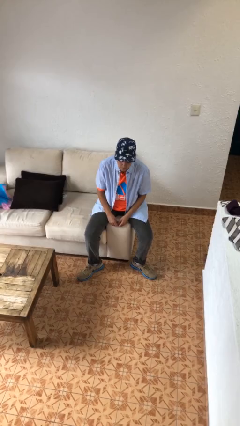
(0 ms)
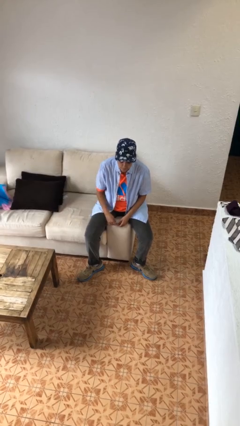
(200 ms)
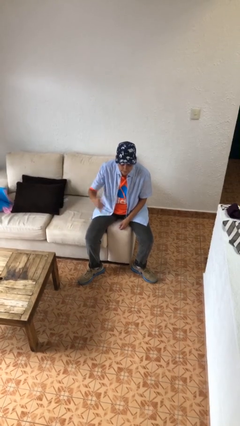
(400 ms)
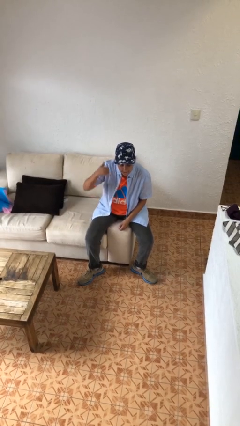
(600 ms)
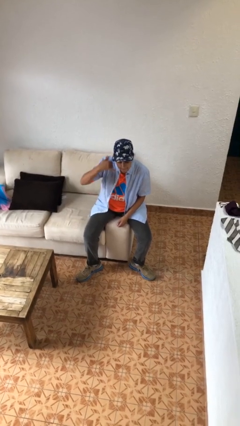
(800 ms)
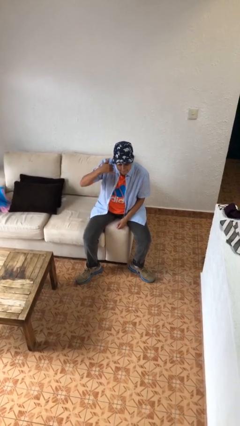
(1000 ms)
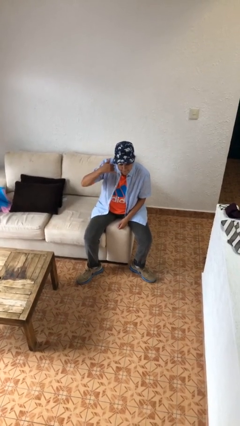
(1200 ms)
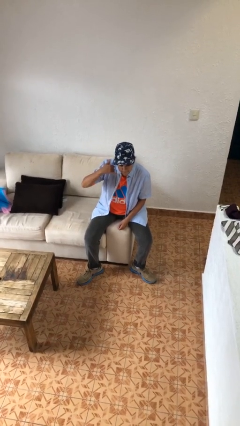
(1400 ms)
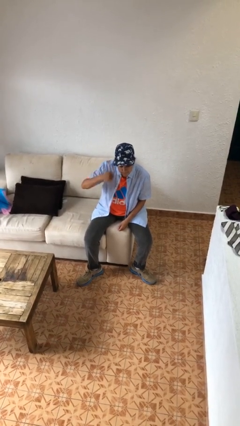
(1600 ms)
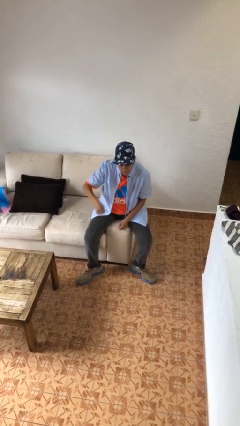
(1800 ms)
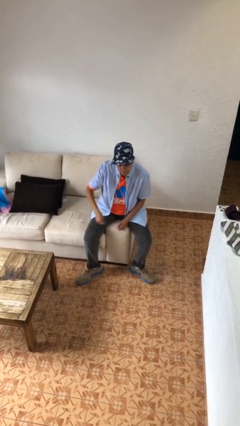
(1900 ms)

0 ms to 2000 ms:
person gestures call me

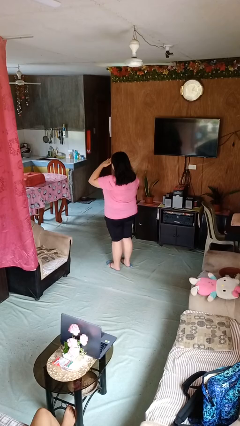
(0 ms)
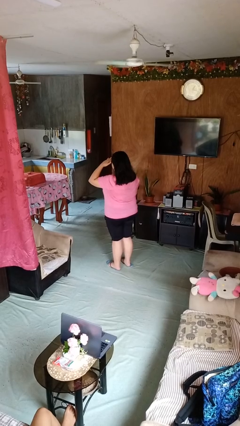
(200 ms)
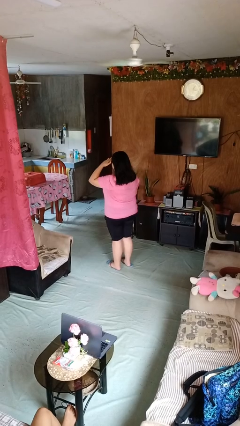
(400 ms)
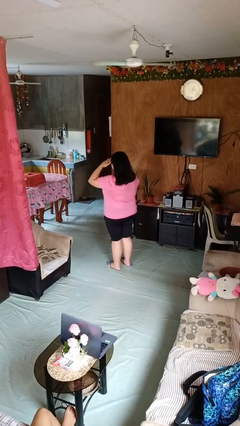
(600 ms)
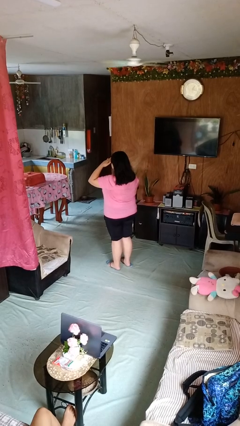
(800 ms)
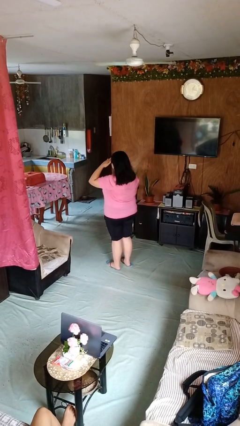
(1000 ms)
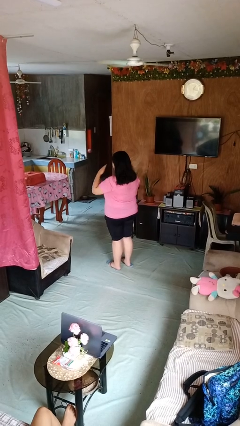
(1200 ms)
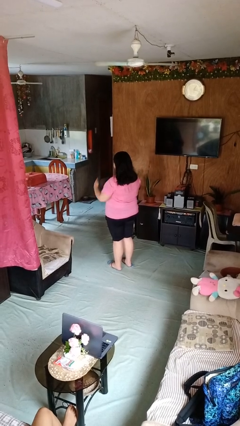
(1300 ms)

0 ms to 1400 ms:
person salutes

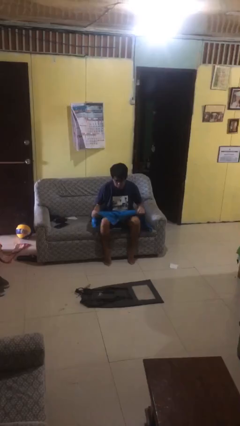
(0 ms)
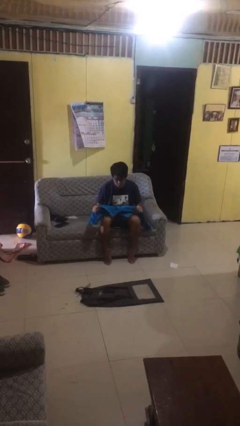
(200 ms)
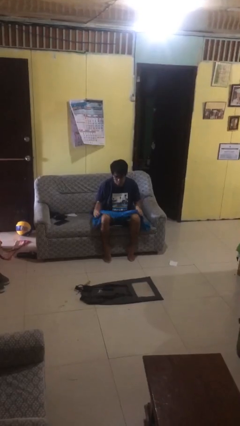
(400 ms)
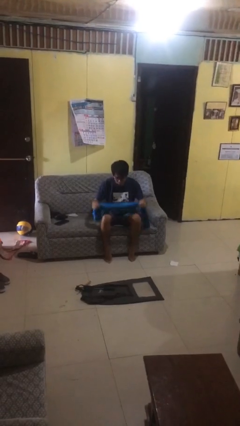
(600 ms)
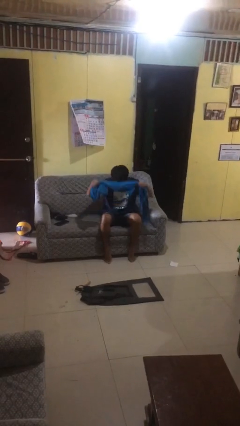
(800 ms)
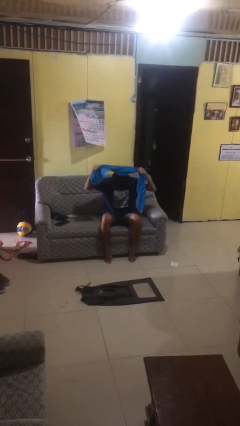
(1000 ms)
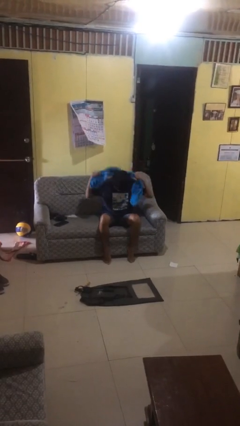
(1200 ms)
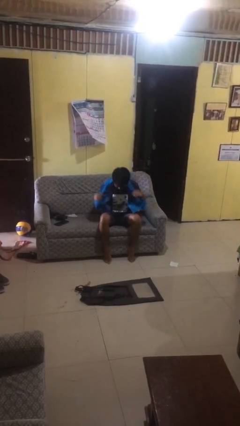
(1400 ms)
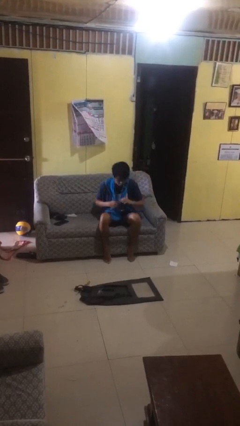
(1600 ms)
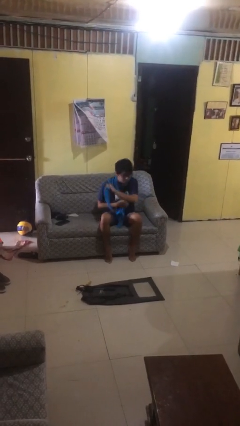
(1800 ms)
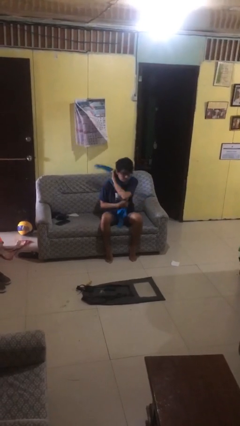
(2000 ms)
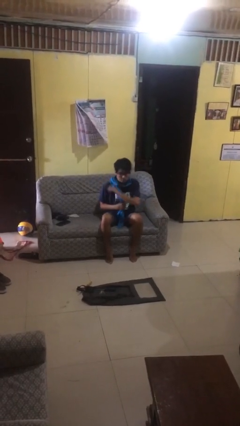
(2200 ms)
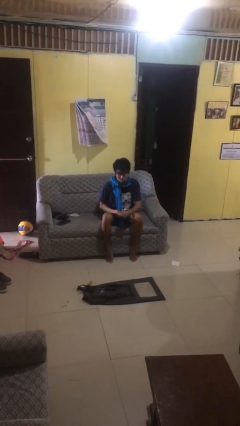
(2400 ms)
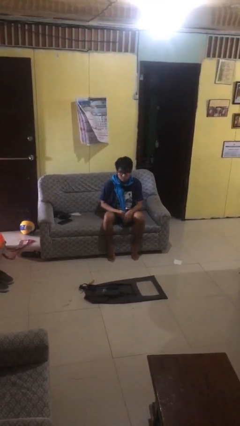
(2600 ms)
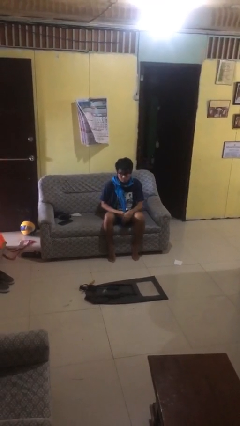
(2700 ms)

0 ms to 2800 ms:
person puts on scarf

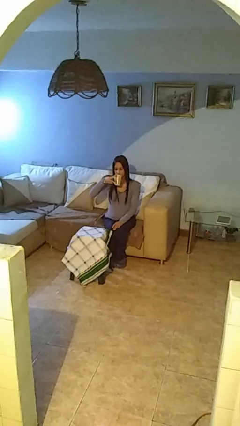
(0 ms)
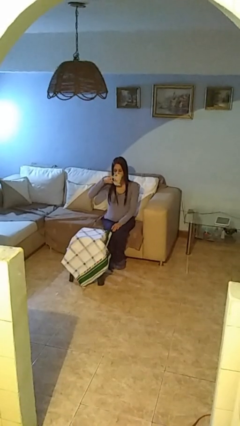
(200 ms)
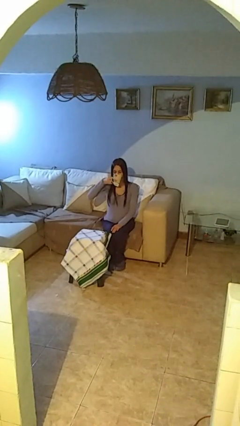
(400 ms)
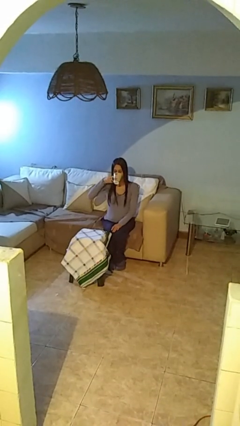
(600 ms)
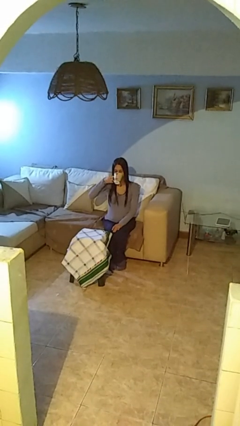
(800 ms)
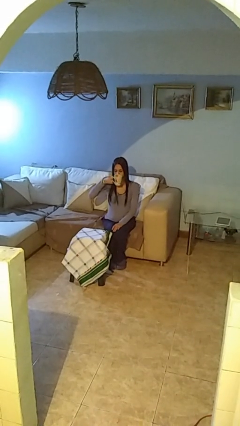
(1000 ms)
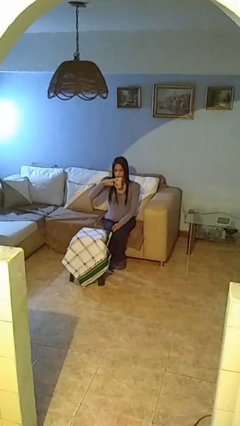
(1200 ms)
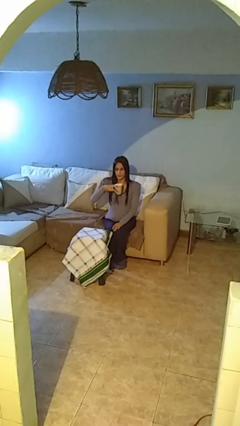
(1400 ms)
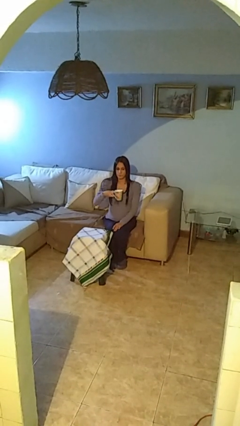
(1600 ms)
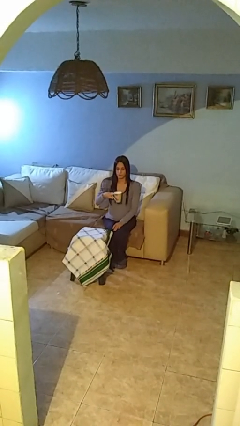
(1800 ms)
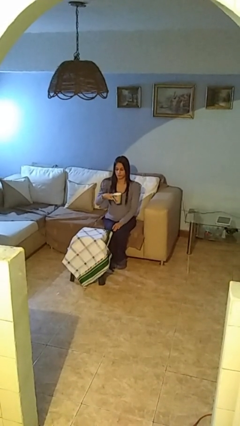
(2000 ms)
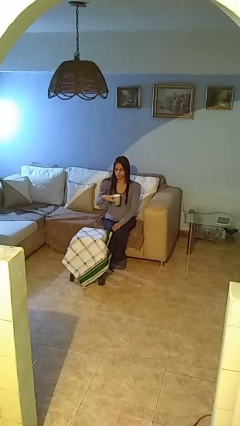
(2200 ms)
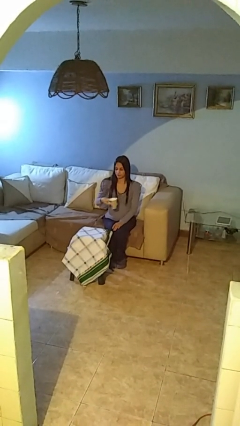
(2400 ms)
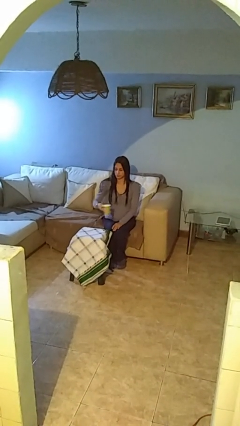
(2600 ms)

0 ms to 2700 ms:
person drinks from mug

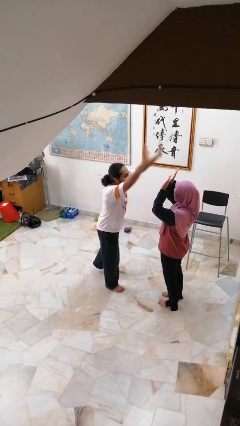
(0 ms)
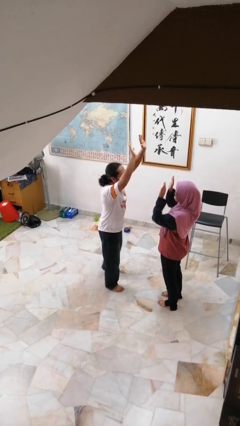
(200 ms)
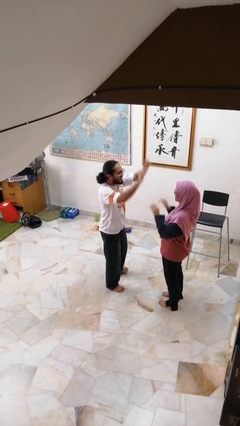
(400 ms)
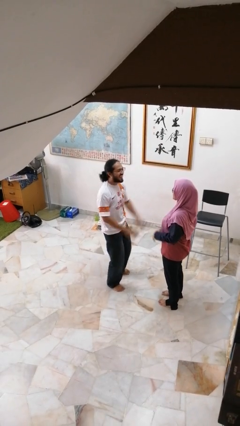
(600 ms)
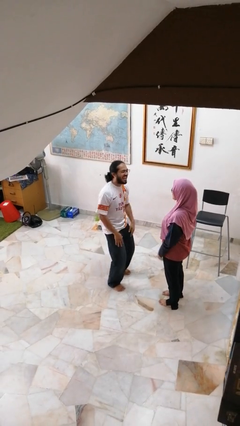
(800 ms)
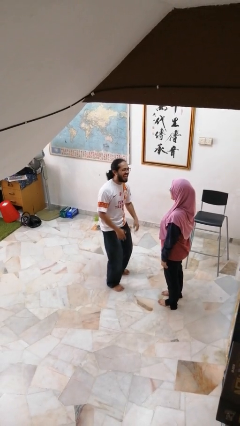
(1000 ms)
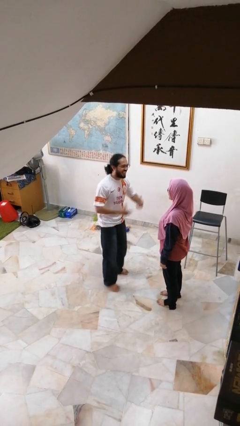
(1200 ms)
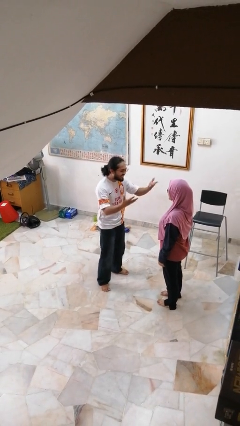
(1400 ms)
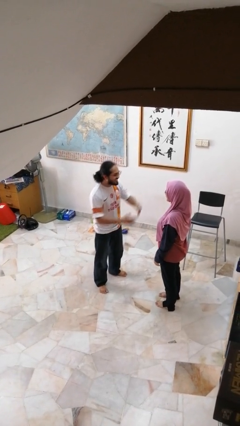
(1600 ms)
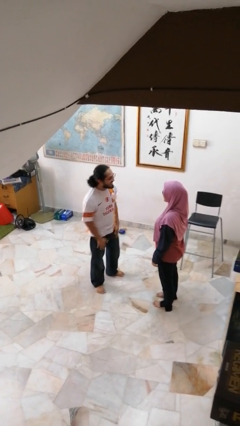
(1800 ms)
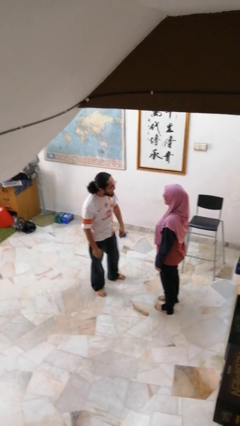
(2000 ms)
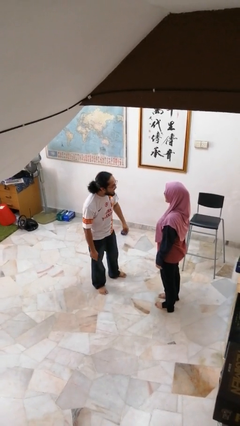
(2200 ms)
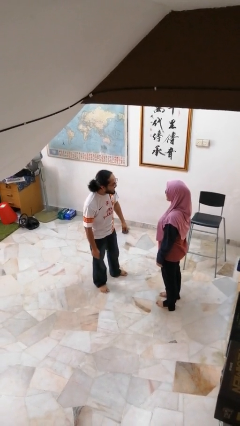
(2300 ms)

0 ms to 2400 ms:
person highfives hand

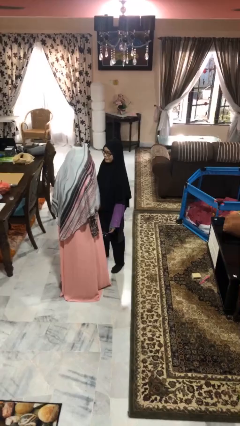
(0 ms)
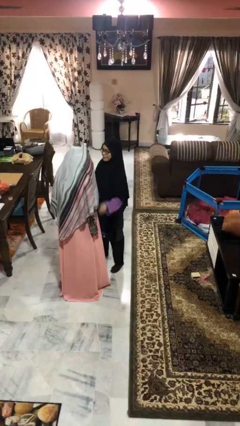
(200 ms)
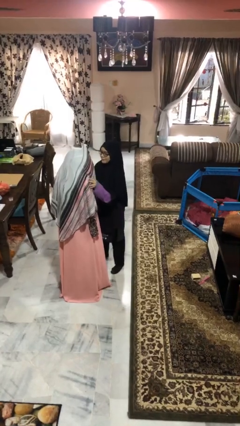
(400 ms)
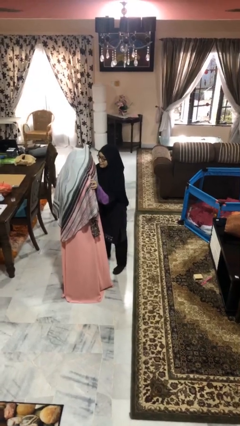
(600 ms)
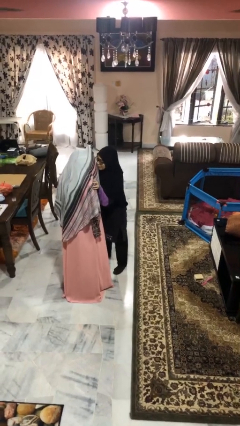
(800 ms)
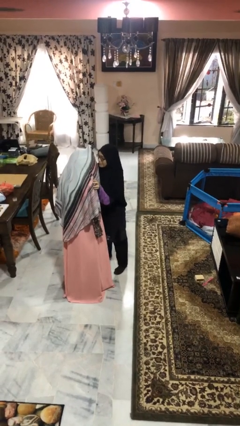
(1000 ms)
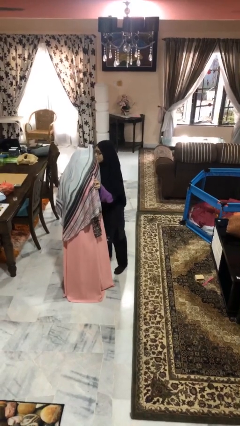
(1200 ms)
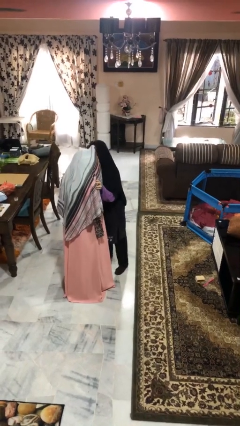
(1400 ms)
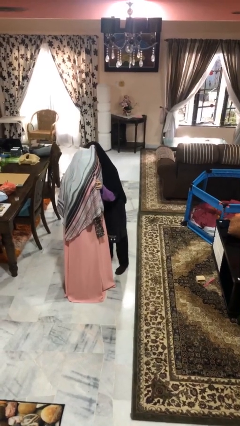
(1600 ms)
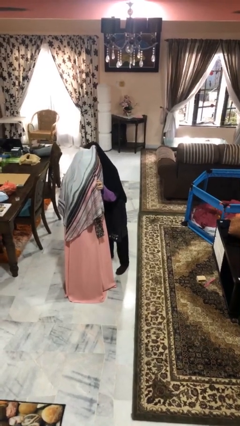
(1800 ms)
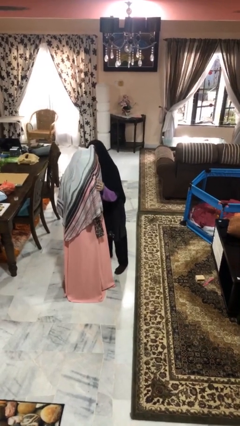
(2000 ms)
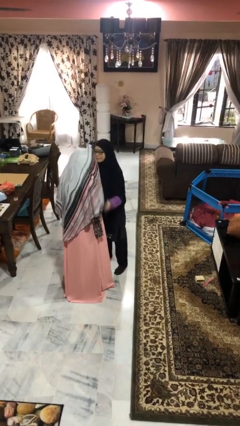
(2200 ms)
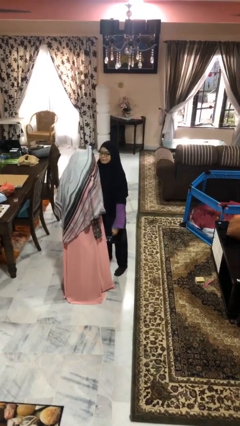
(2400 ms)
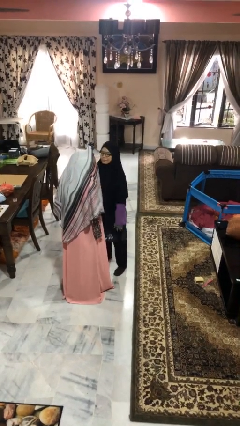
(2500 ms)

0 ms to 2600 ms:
person kisses cheek of person

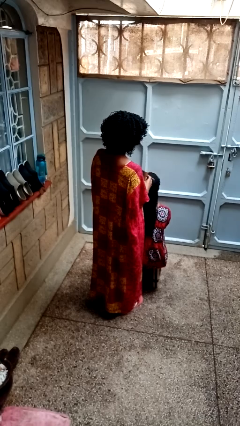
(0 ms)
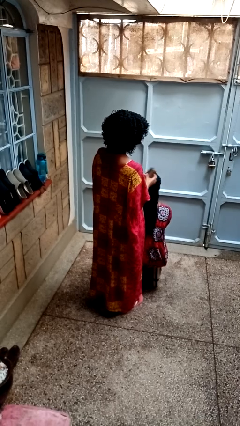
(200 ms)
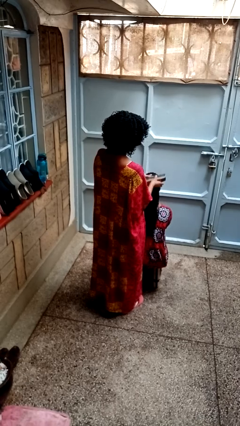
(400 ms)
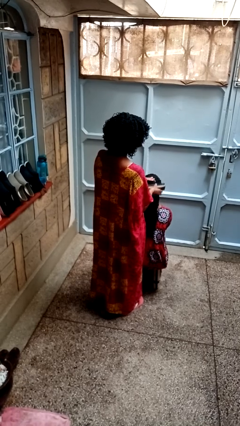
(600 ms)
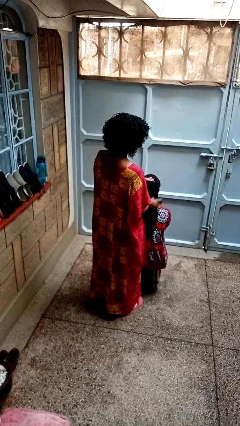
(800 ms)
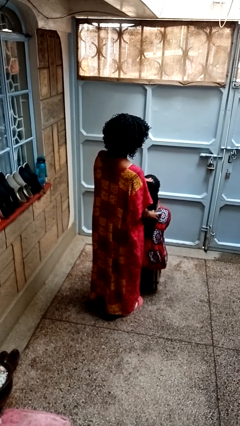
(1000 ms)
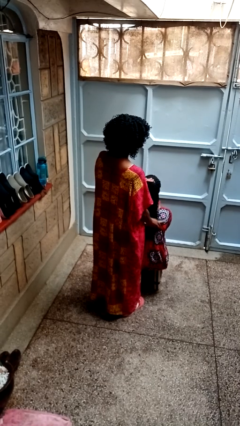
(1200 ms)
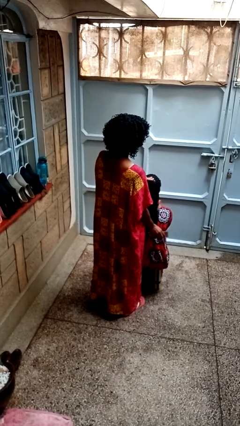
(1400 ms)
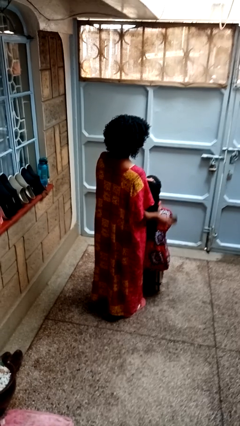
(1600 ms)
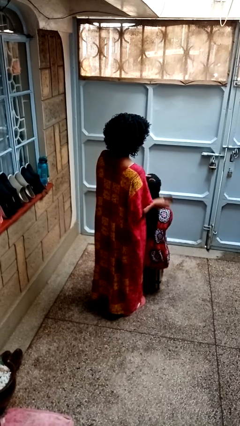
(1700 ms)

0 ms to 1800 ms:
person brushes hair of person

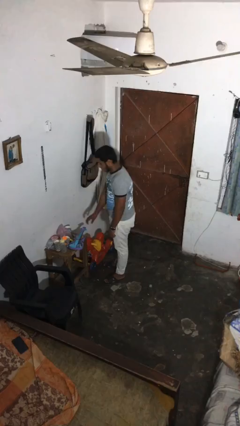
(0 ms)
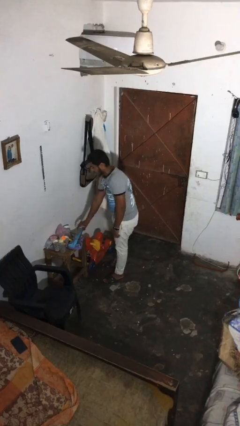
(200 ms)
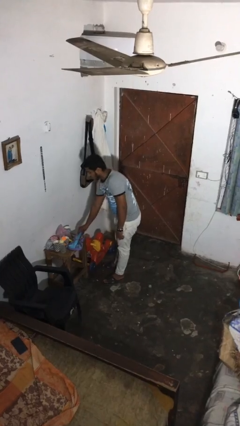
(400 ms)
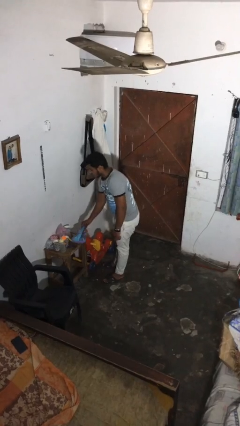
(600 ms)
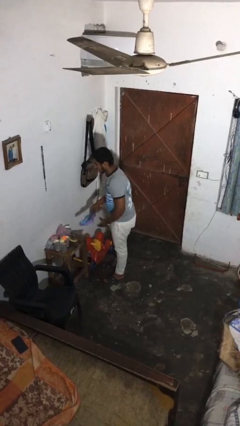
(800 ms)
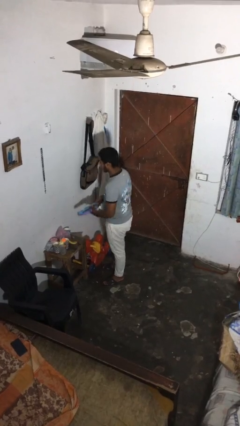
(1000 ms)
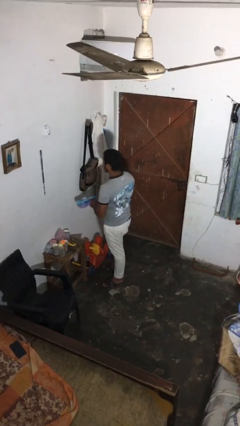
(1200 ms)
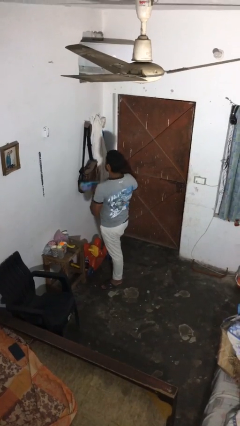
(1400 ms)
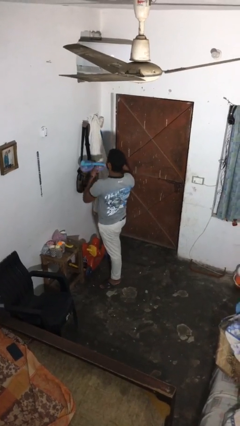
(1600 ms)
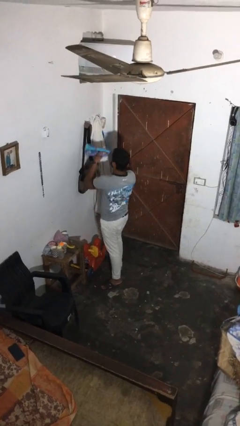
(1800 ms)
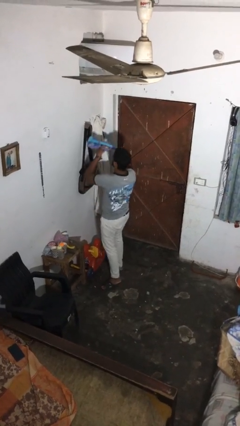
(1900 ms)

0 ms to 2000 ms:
person picks up object from table
